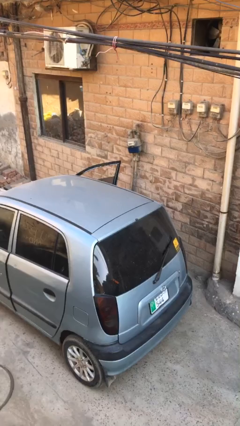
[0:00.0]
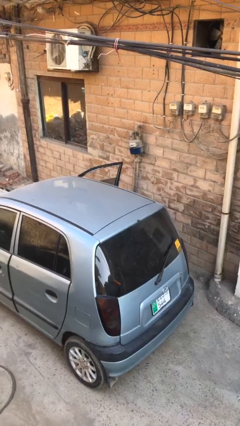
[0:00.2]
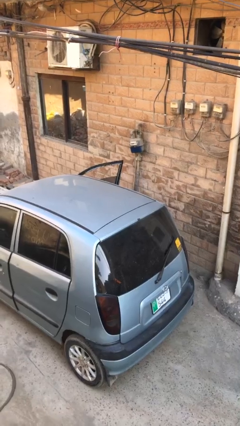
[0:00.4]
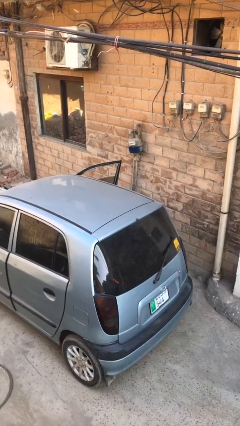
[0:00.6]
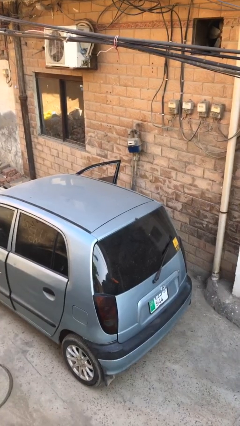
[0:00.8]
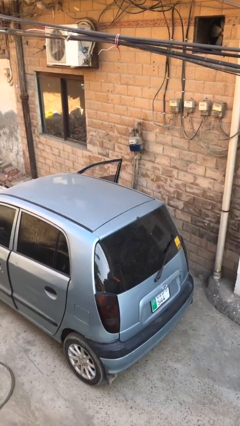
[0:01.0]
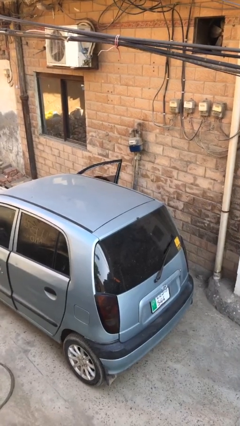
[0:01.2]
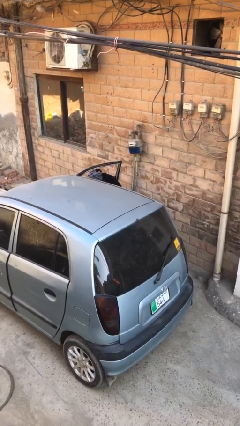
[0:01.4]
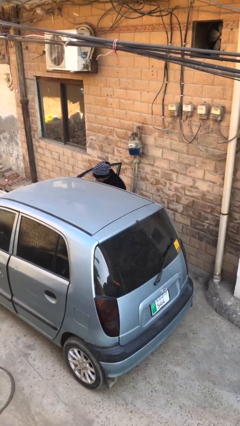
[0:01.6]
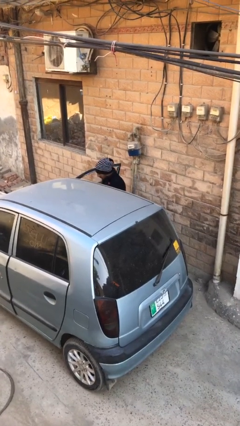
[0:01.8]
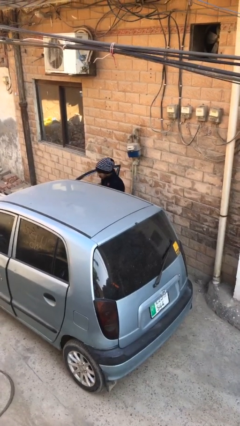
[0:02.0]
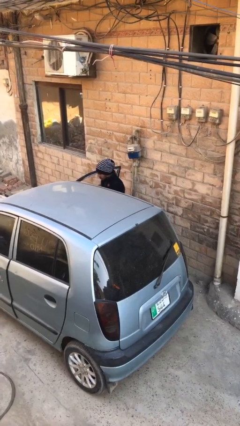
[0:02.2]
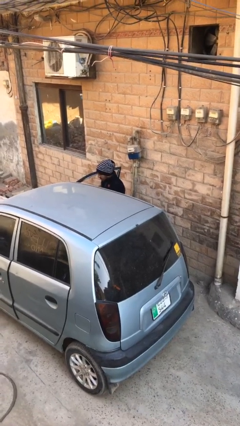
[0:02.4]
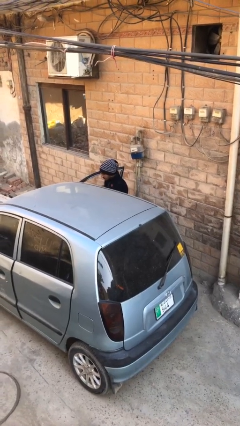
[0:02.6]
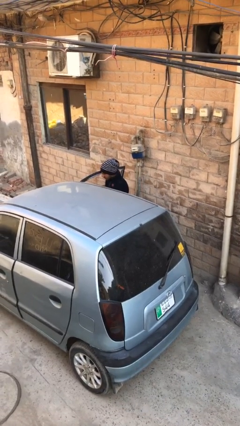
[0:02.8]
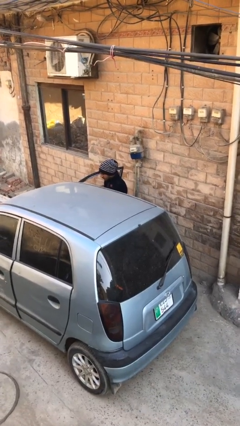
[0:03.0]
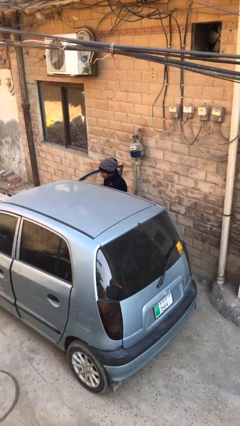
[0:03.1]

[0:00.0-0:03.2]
person exits car

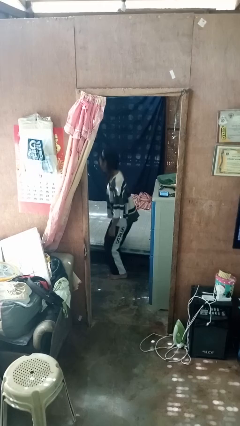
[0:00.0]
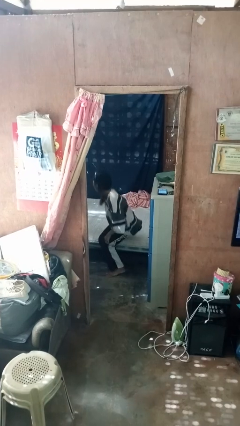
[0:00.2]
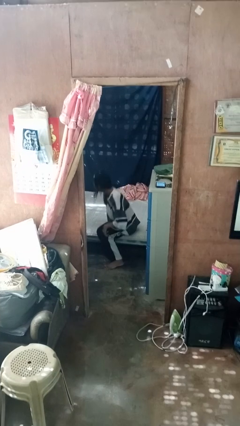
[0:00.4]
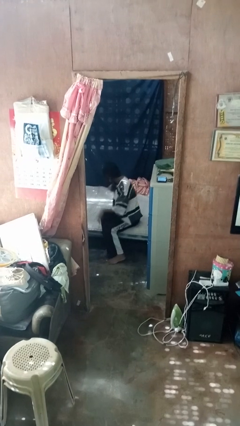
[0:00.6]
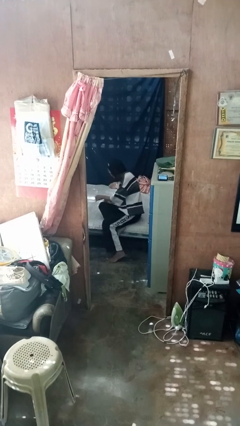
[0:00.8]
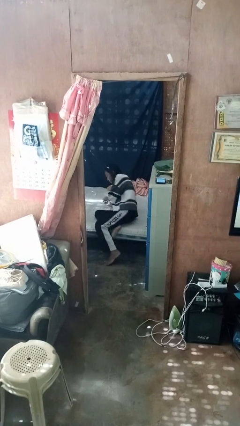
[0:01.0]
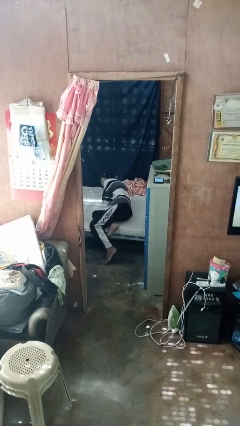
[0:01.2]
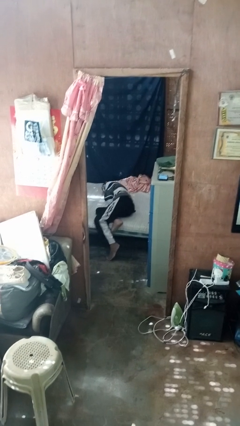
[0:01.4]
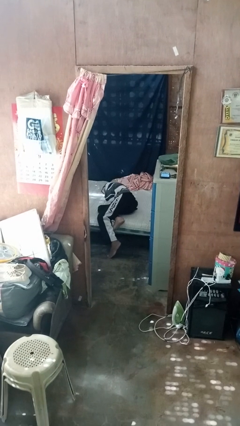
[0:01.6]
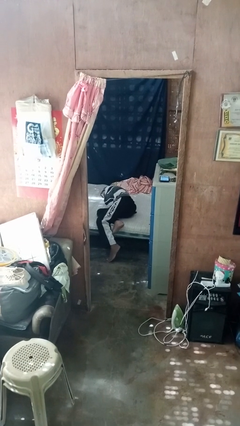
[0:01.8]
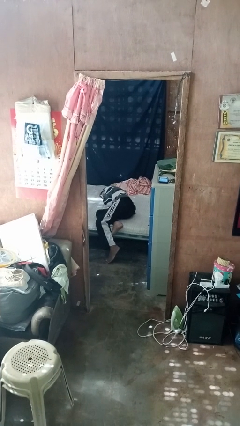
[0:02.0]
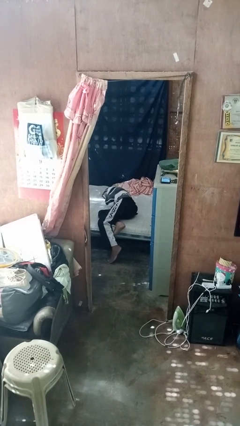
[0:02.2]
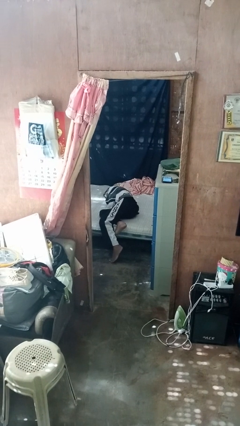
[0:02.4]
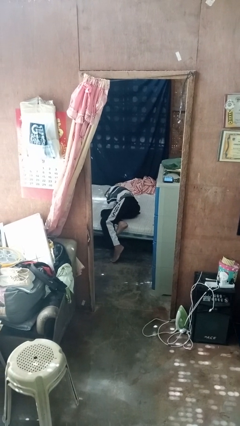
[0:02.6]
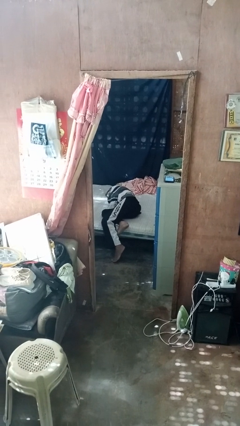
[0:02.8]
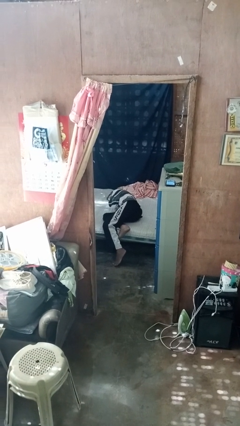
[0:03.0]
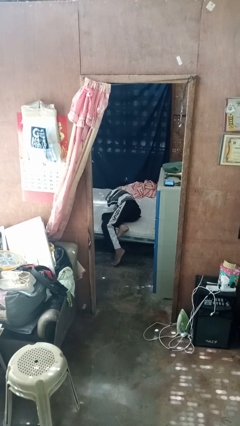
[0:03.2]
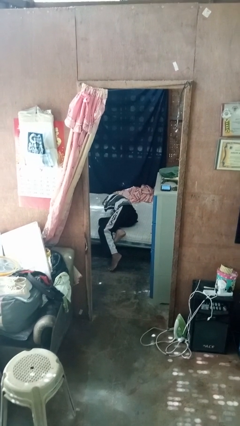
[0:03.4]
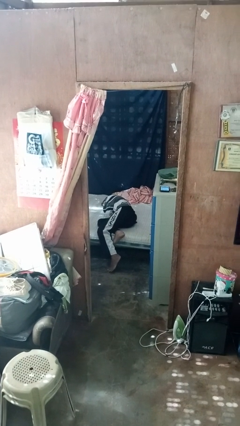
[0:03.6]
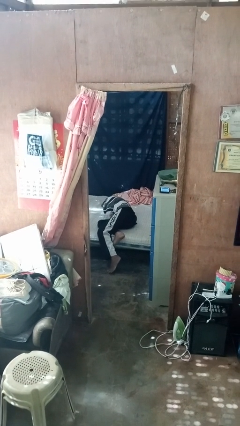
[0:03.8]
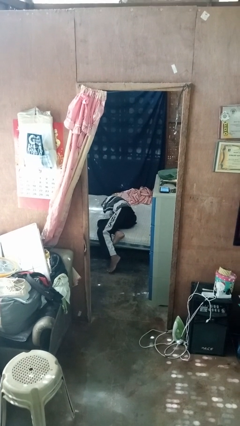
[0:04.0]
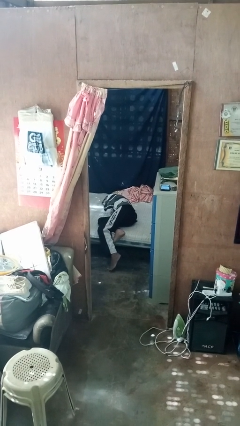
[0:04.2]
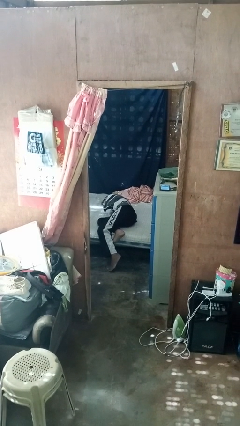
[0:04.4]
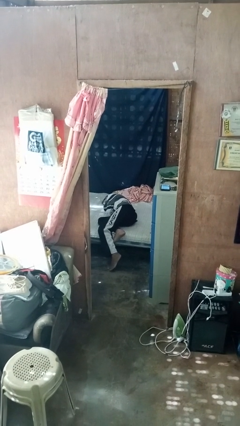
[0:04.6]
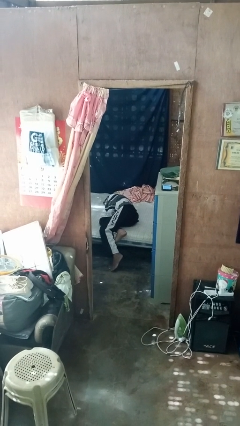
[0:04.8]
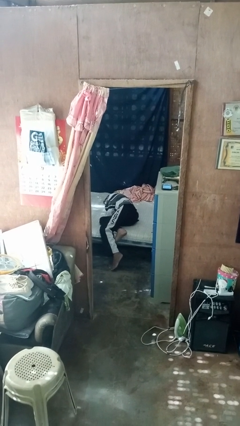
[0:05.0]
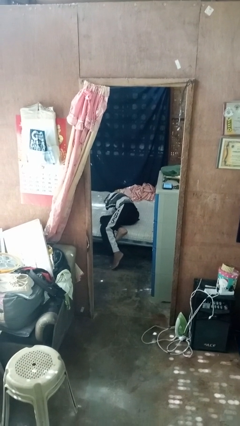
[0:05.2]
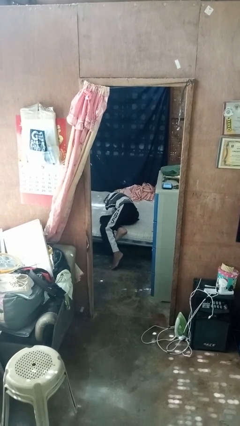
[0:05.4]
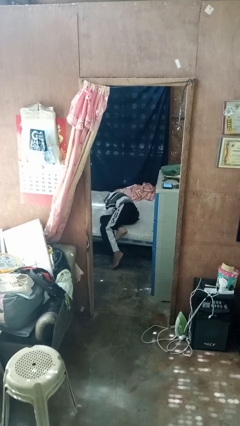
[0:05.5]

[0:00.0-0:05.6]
person lies down on bed

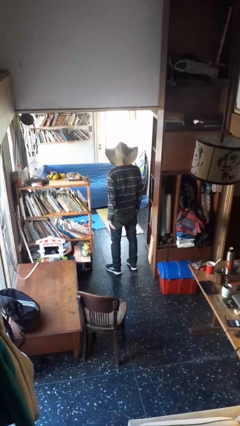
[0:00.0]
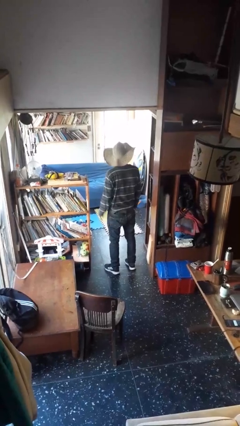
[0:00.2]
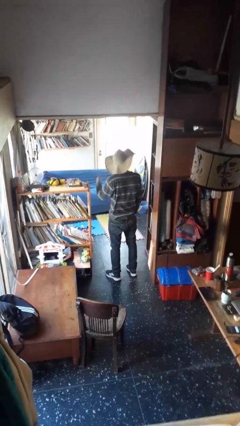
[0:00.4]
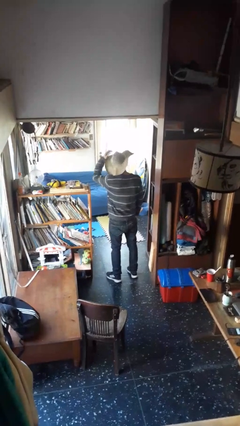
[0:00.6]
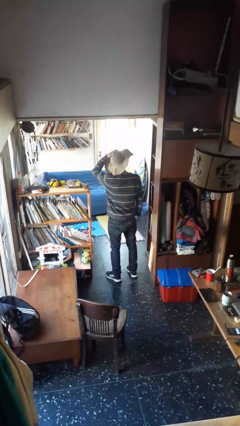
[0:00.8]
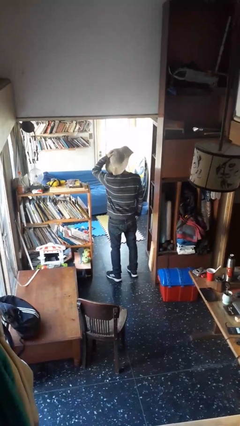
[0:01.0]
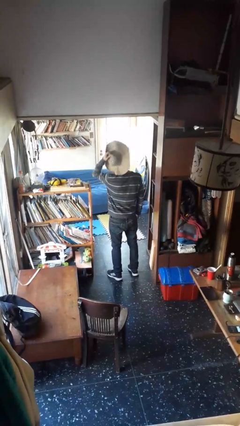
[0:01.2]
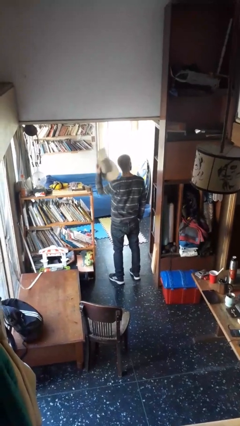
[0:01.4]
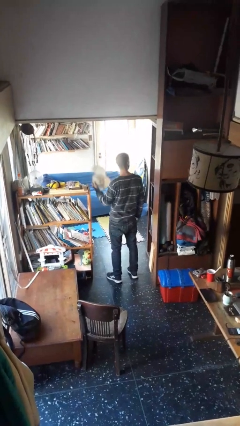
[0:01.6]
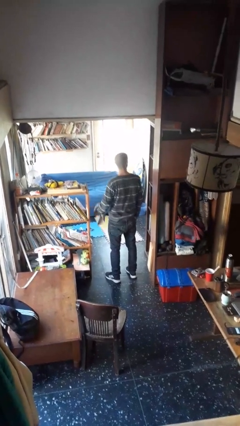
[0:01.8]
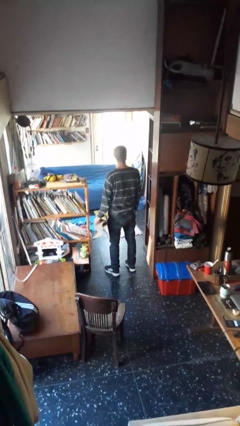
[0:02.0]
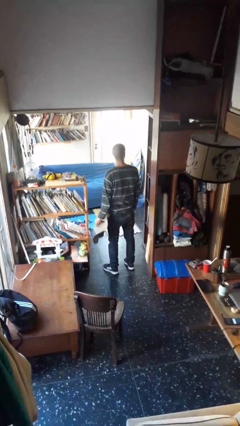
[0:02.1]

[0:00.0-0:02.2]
person takes off hat

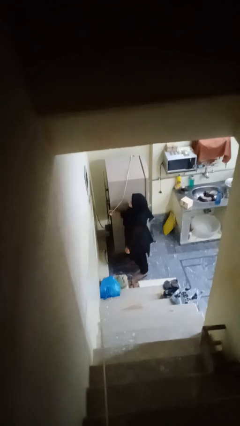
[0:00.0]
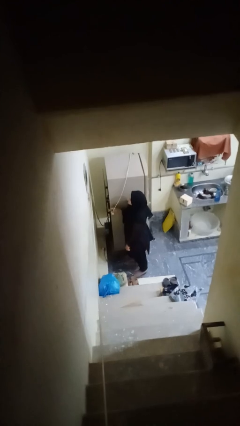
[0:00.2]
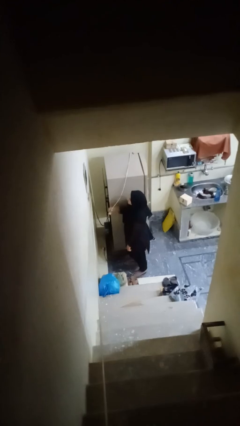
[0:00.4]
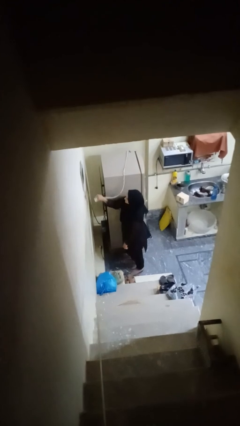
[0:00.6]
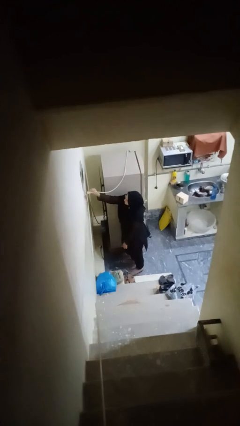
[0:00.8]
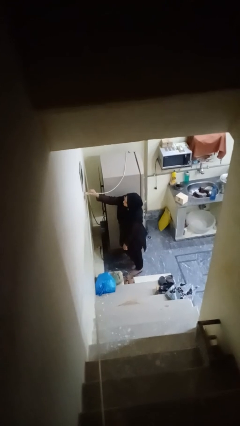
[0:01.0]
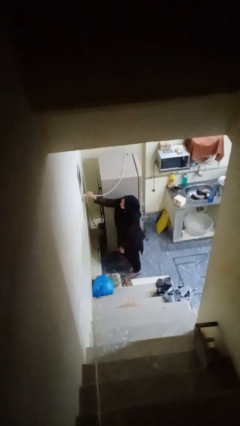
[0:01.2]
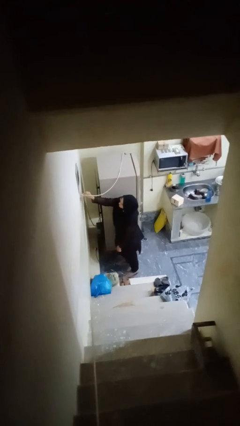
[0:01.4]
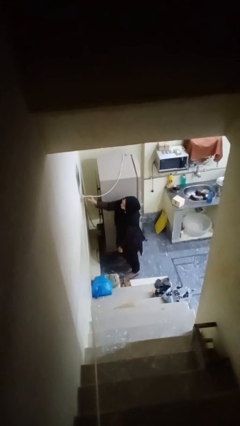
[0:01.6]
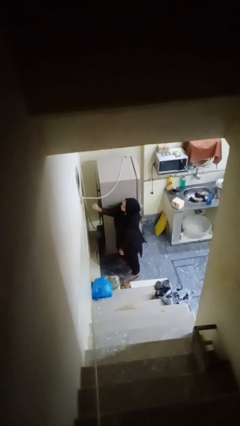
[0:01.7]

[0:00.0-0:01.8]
person plugs into electrical socket

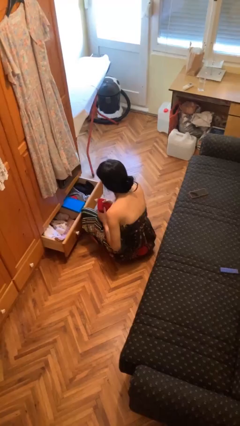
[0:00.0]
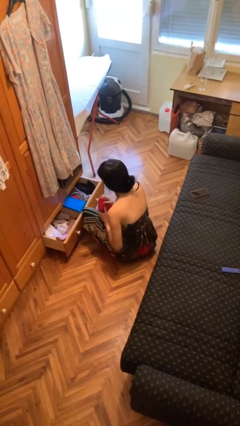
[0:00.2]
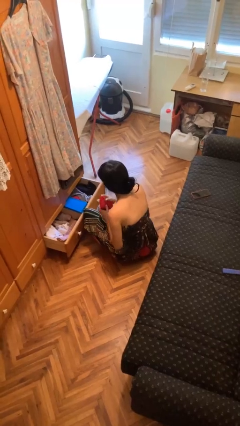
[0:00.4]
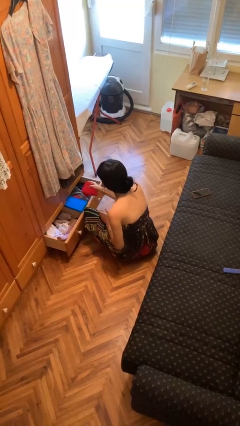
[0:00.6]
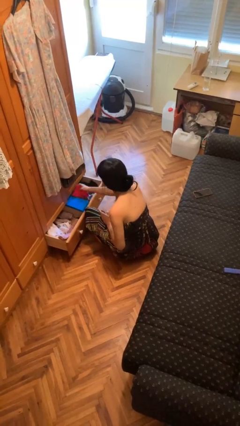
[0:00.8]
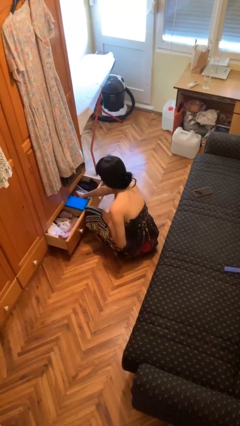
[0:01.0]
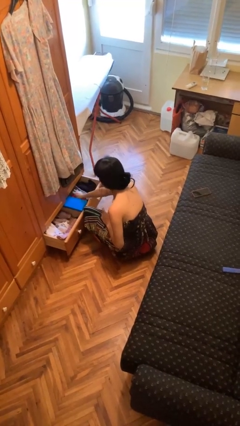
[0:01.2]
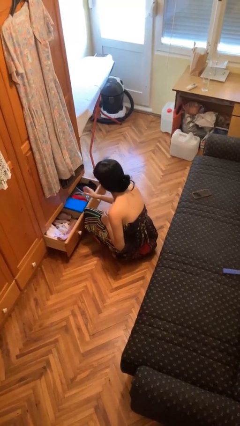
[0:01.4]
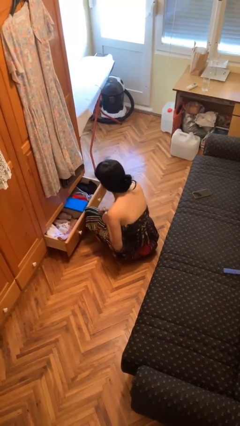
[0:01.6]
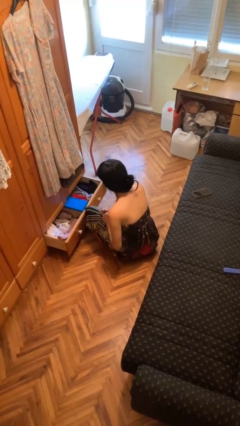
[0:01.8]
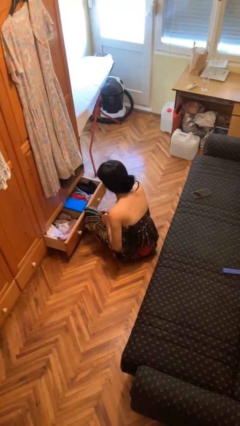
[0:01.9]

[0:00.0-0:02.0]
person puts clothes into dresser

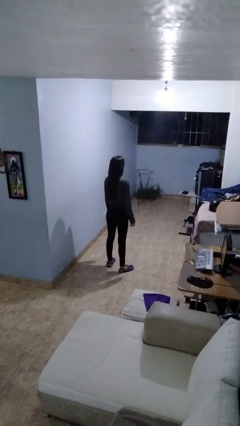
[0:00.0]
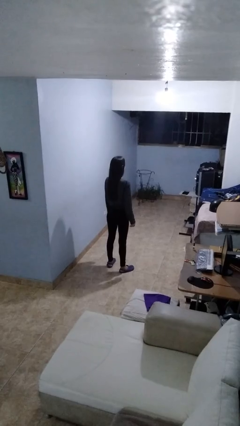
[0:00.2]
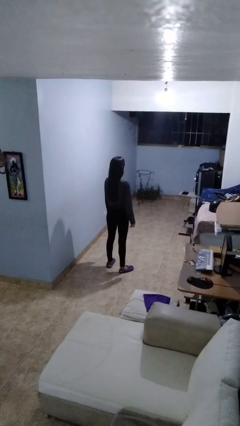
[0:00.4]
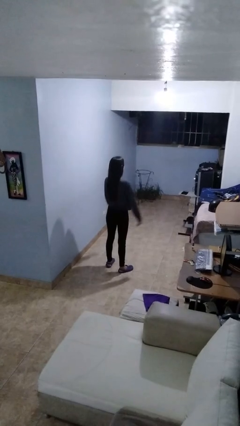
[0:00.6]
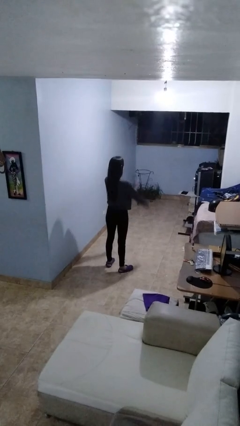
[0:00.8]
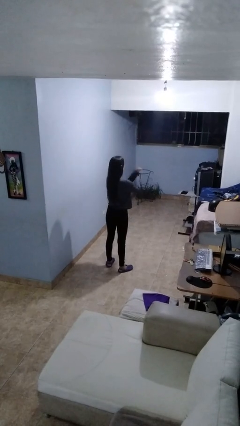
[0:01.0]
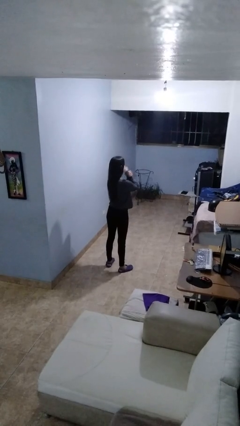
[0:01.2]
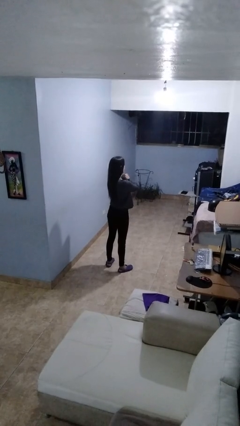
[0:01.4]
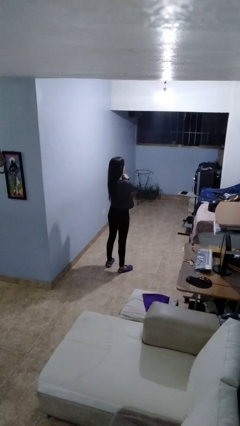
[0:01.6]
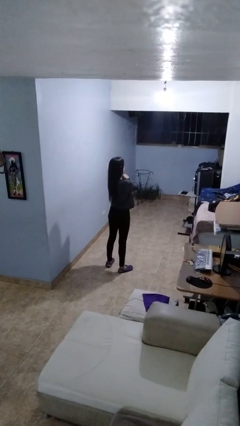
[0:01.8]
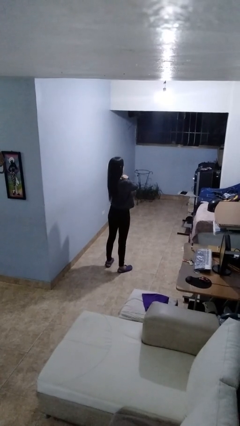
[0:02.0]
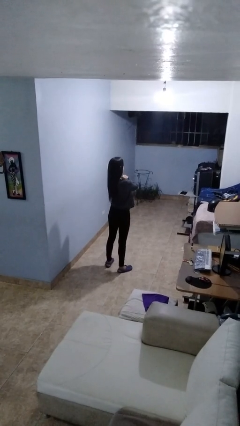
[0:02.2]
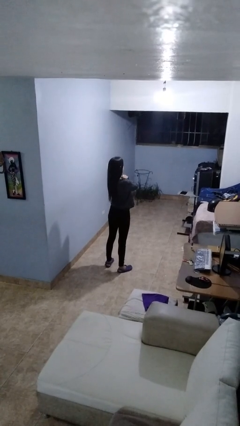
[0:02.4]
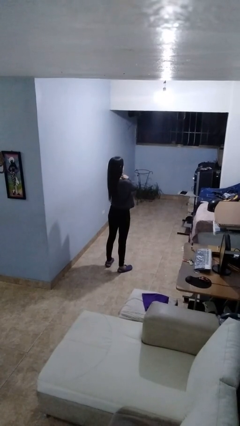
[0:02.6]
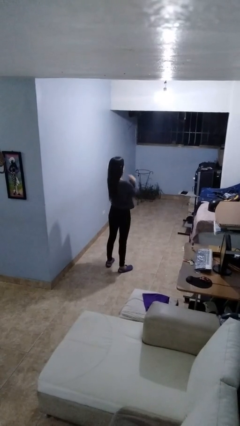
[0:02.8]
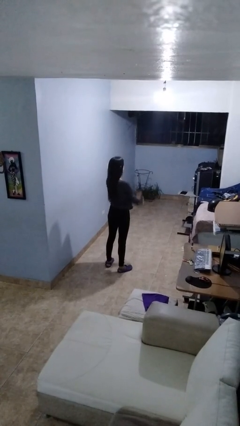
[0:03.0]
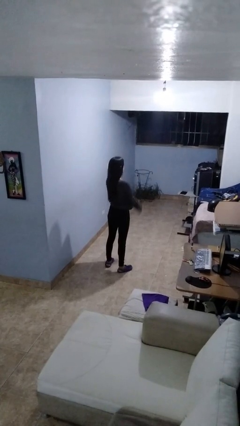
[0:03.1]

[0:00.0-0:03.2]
person gestures arms x
